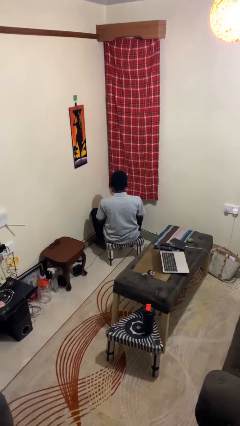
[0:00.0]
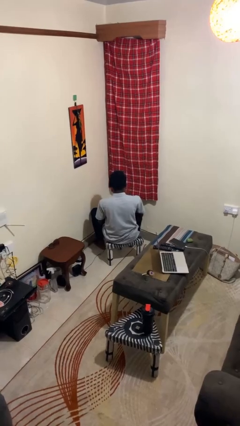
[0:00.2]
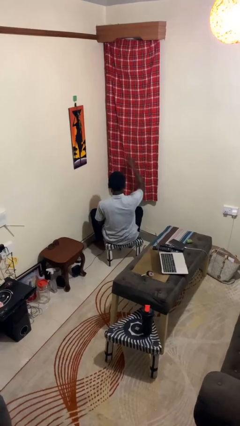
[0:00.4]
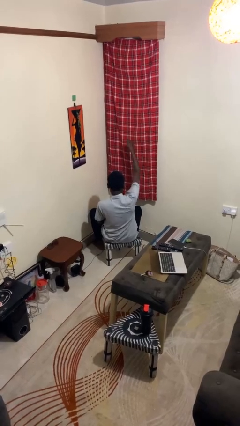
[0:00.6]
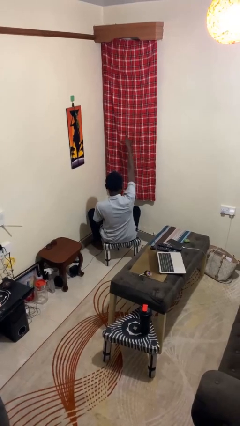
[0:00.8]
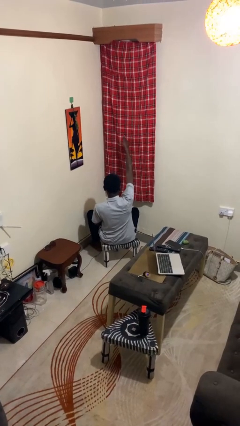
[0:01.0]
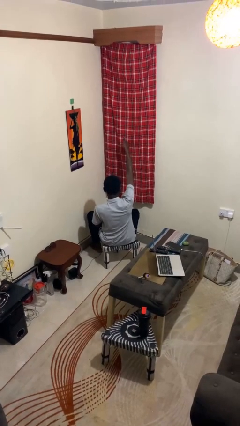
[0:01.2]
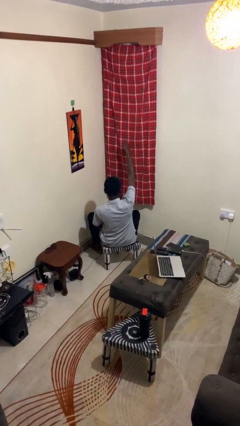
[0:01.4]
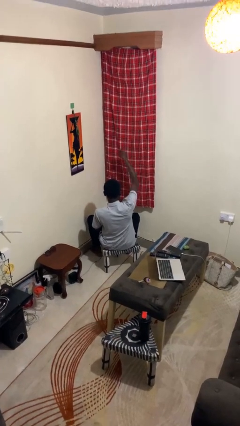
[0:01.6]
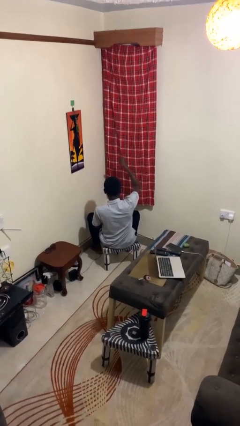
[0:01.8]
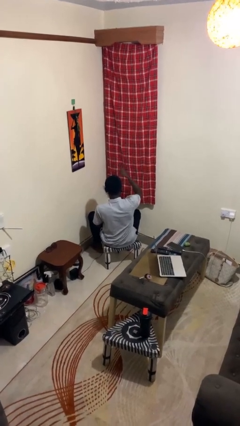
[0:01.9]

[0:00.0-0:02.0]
person gestures thumbs up

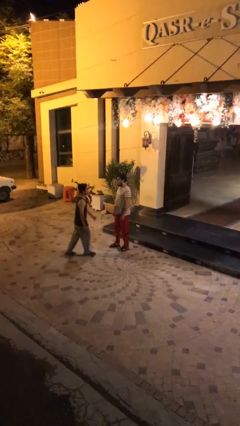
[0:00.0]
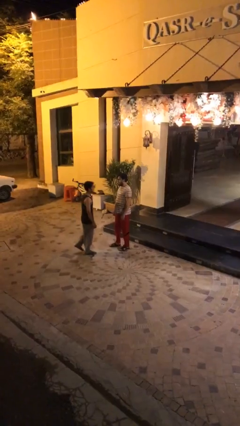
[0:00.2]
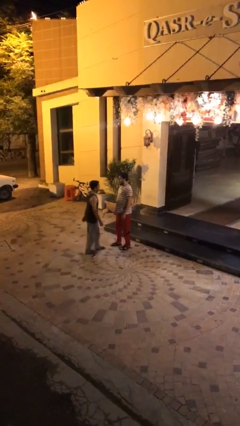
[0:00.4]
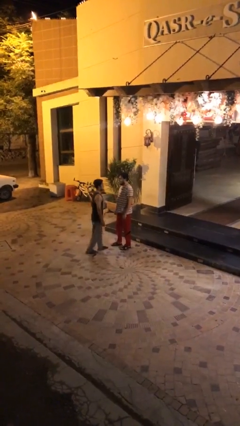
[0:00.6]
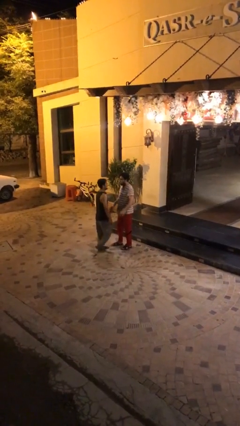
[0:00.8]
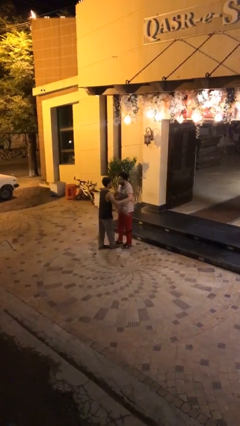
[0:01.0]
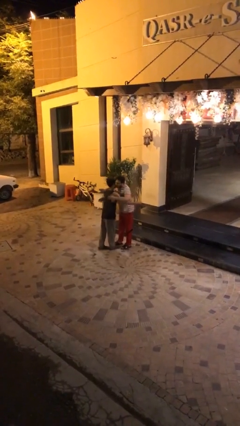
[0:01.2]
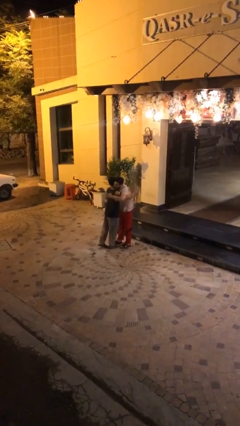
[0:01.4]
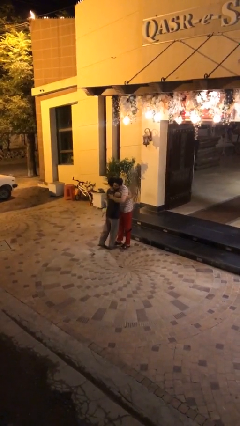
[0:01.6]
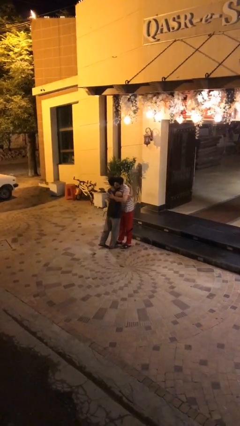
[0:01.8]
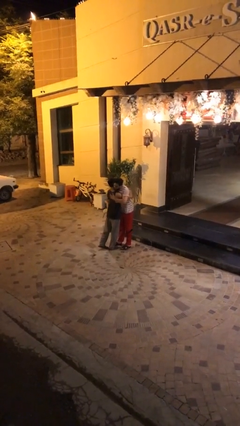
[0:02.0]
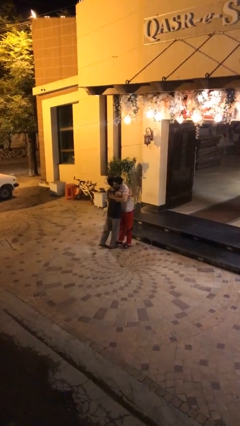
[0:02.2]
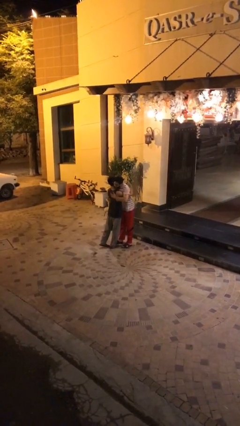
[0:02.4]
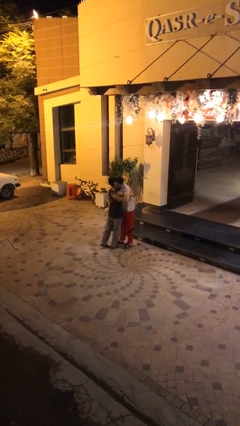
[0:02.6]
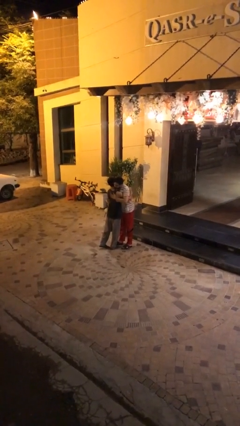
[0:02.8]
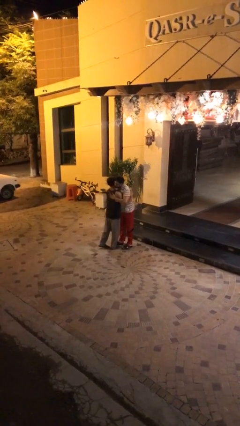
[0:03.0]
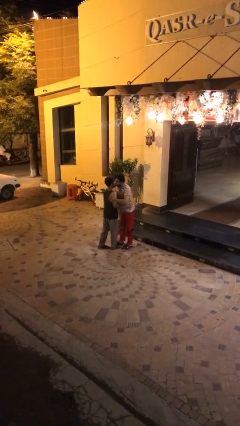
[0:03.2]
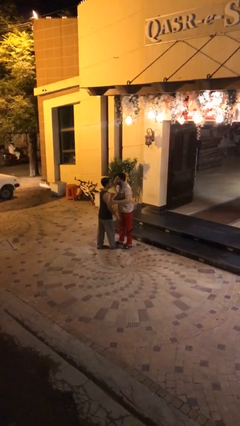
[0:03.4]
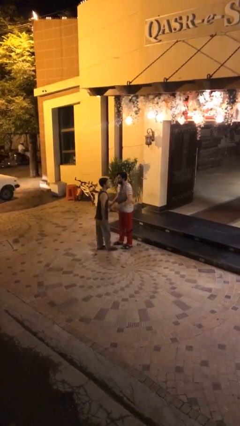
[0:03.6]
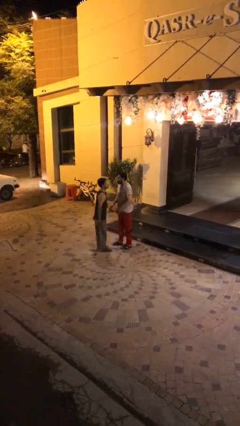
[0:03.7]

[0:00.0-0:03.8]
person embraces person

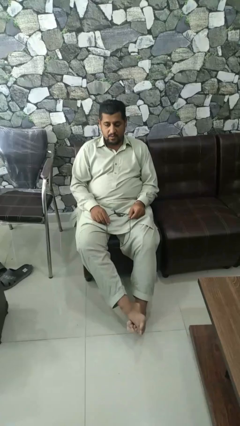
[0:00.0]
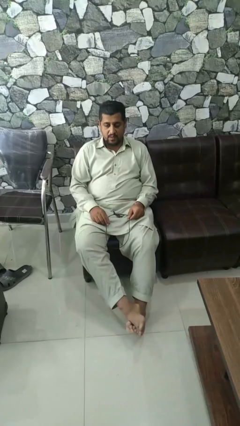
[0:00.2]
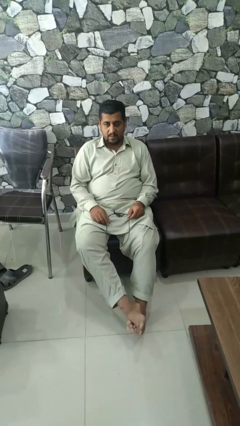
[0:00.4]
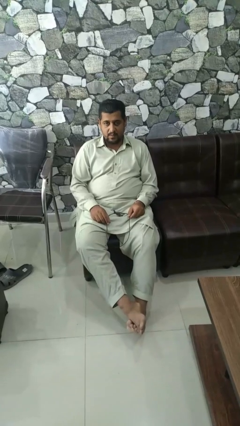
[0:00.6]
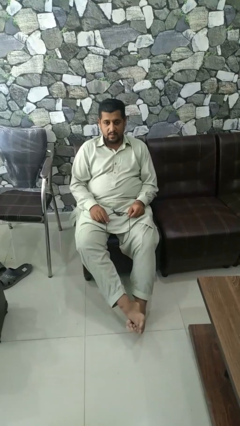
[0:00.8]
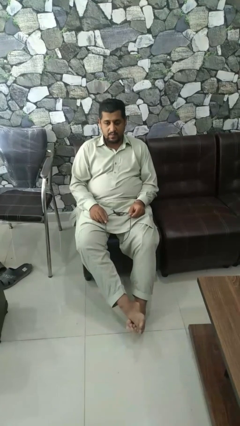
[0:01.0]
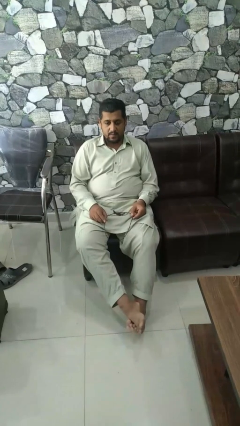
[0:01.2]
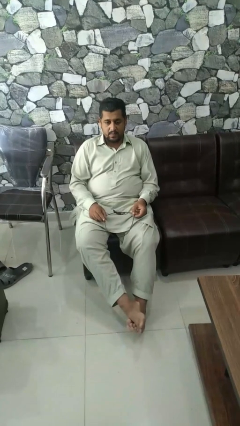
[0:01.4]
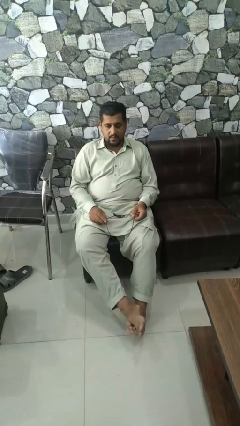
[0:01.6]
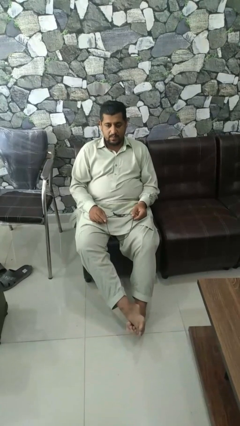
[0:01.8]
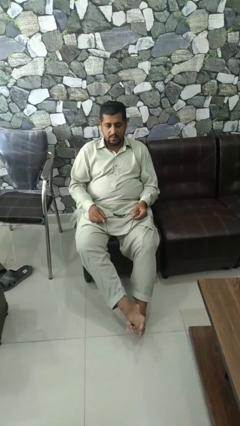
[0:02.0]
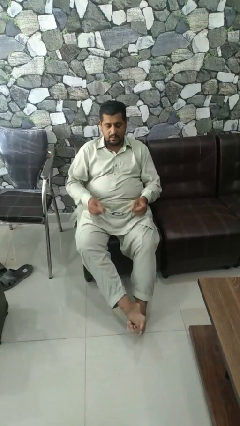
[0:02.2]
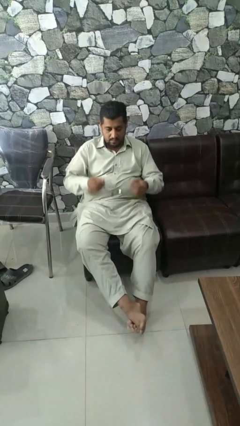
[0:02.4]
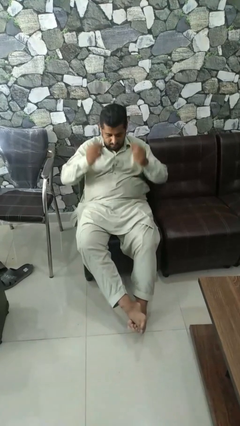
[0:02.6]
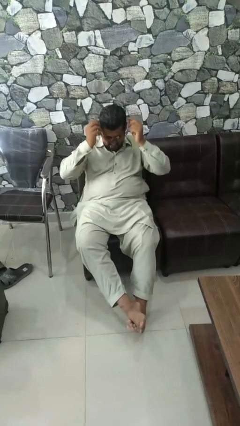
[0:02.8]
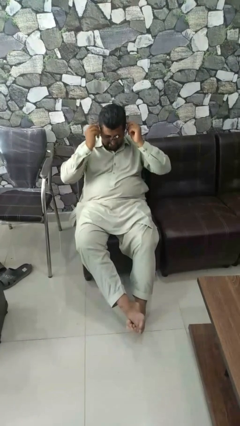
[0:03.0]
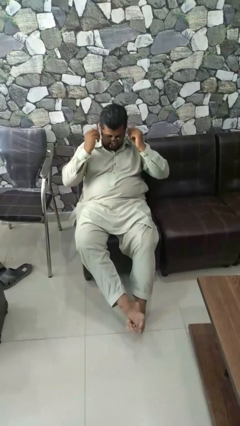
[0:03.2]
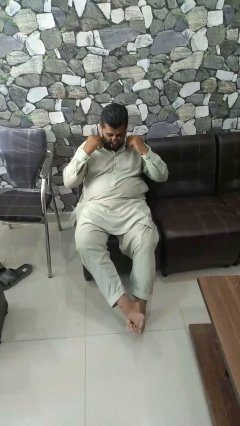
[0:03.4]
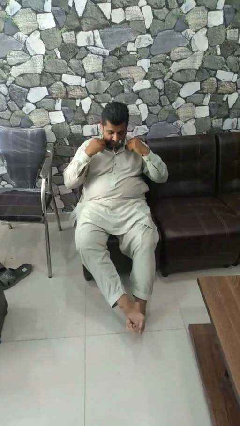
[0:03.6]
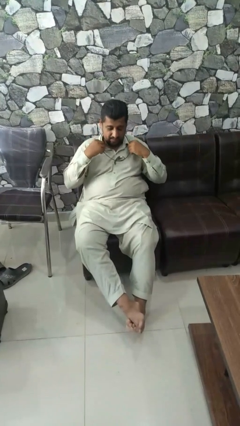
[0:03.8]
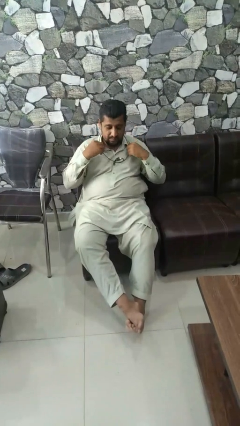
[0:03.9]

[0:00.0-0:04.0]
person puts on necklace

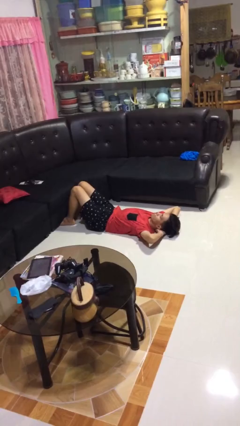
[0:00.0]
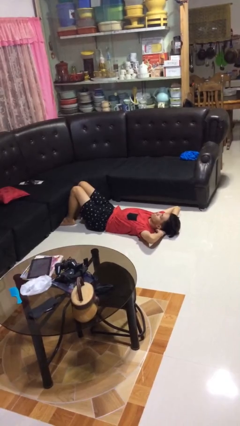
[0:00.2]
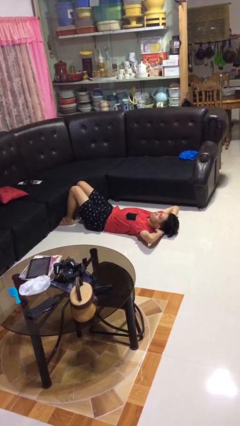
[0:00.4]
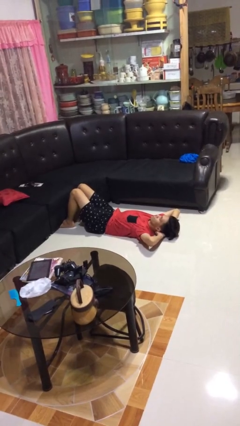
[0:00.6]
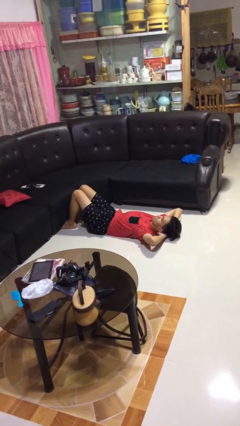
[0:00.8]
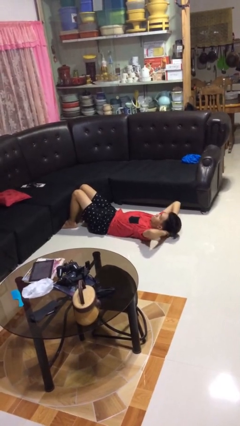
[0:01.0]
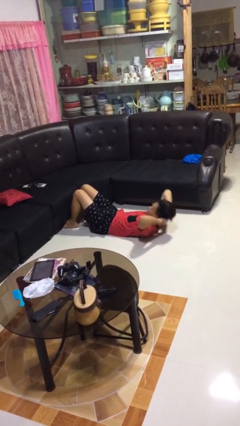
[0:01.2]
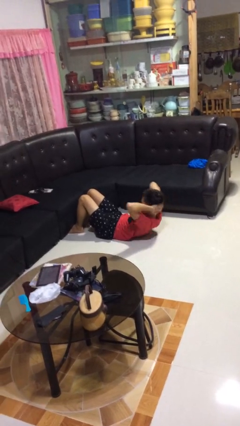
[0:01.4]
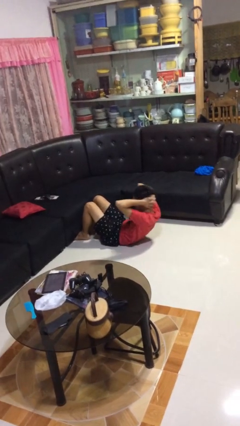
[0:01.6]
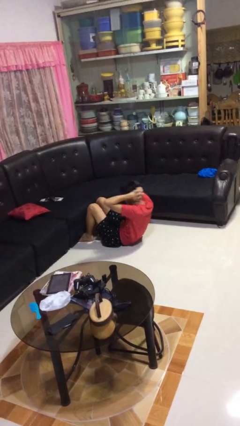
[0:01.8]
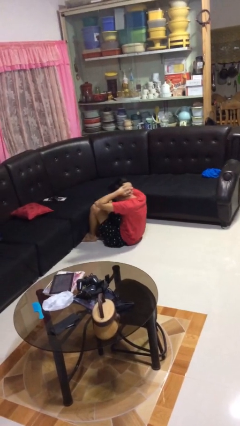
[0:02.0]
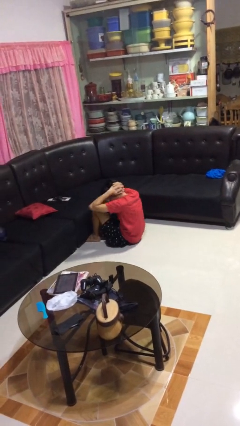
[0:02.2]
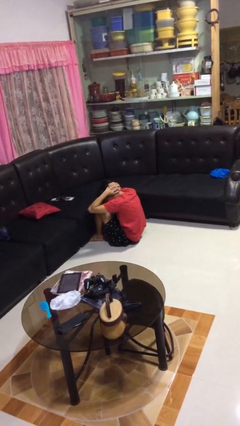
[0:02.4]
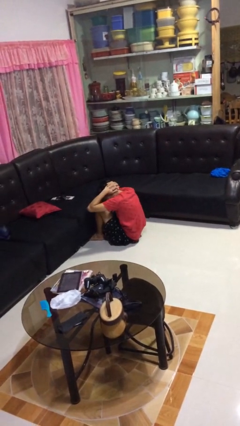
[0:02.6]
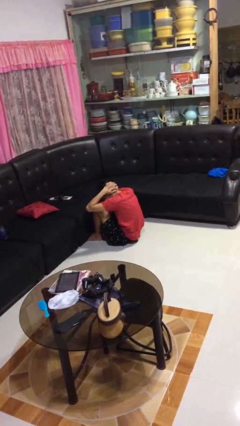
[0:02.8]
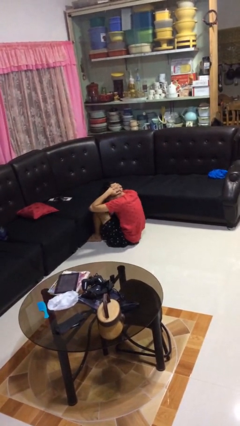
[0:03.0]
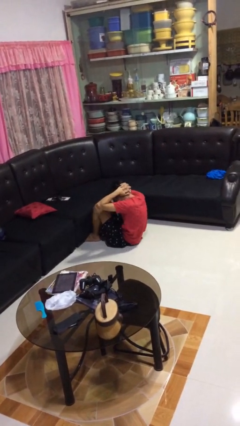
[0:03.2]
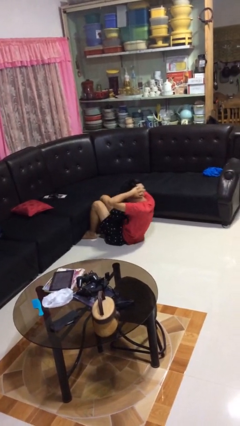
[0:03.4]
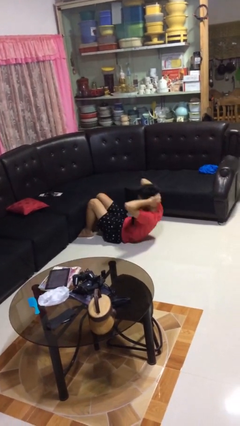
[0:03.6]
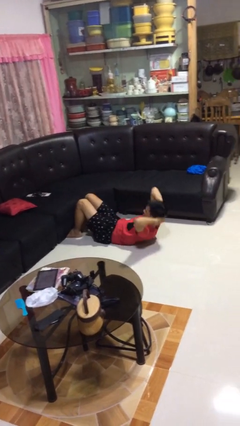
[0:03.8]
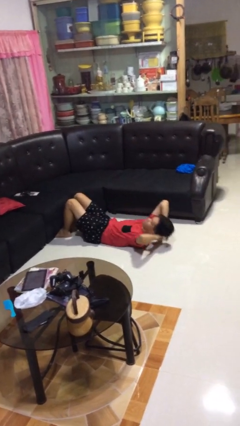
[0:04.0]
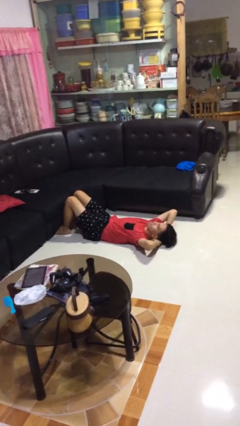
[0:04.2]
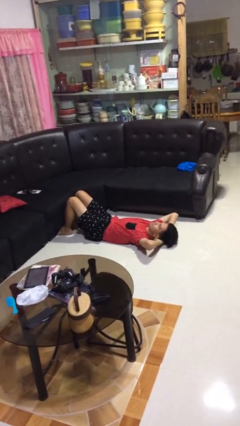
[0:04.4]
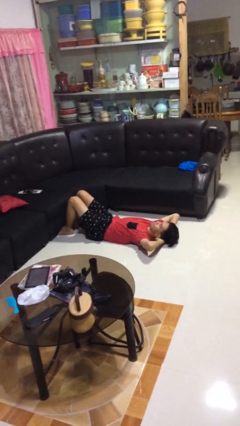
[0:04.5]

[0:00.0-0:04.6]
person exercises with situp

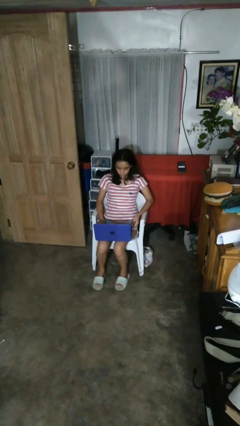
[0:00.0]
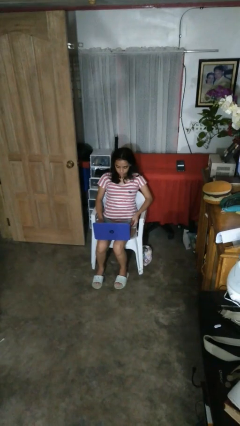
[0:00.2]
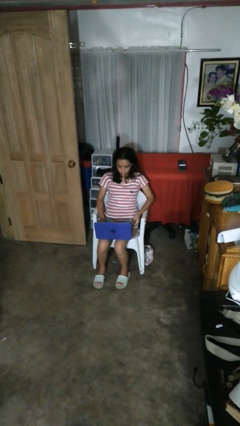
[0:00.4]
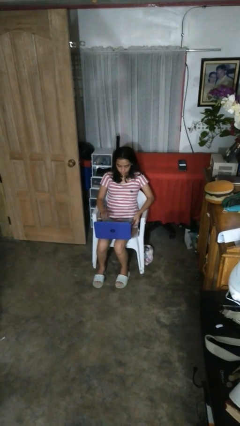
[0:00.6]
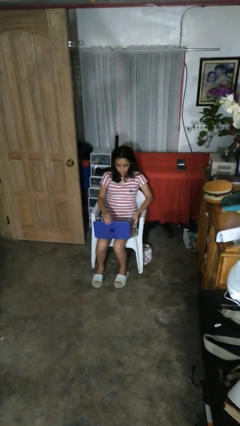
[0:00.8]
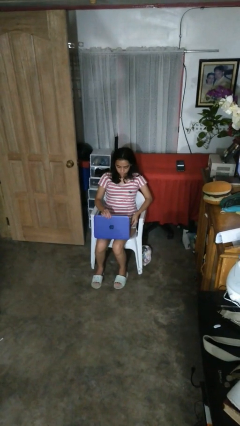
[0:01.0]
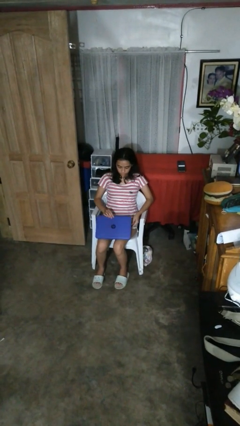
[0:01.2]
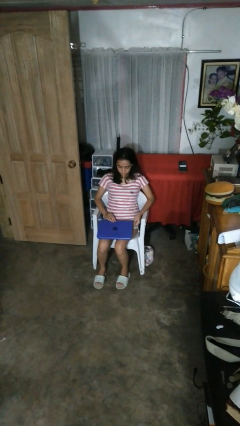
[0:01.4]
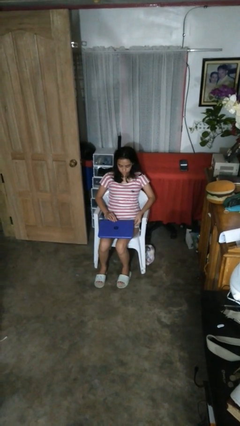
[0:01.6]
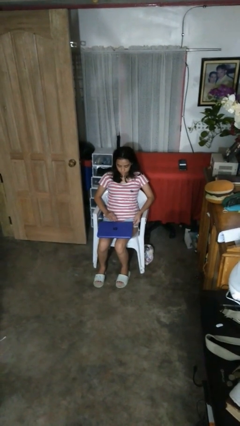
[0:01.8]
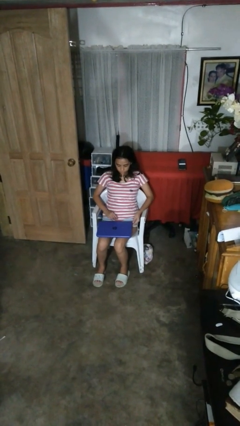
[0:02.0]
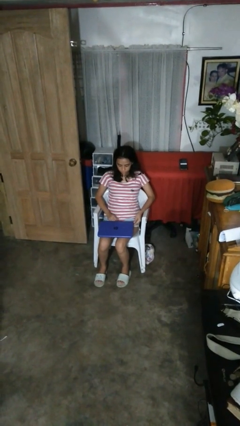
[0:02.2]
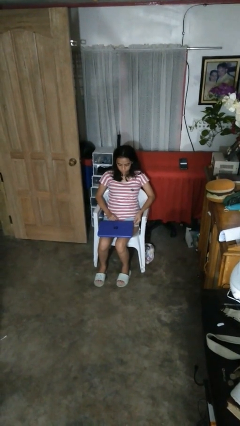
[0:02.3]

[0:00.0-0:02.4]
person closes laptop

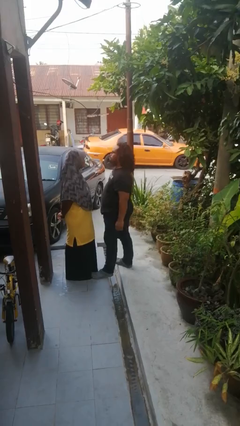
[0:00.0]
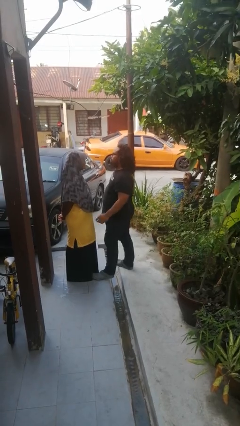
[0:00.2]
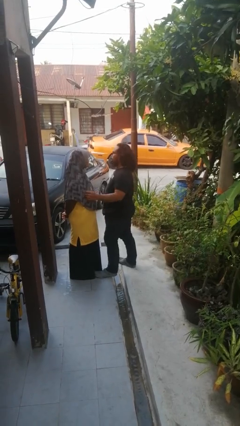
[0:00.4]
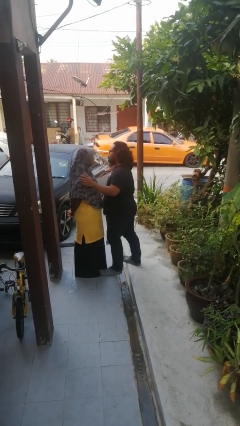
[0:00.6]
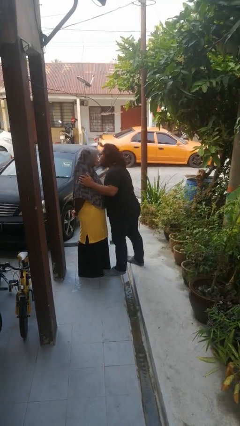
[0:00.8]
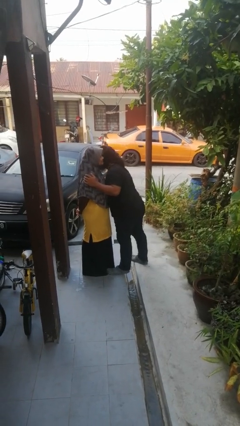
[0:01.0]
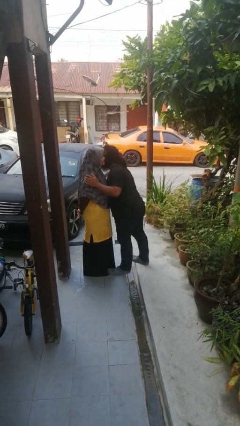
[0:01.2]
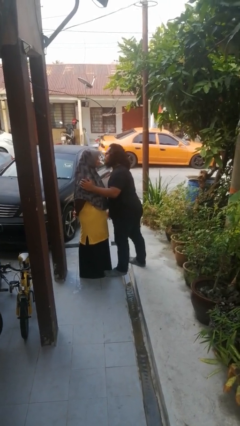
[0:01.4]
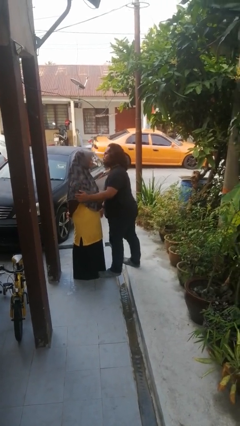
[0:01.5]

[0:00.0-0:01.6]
person kisses cheek of person
